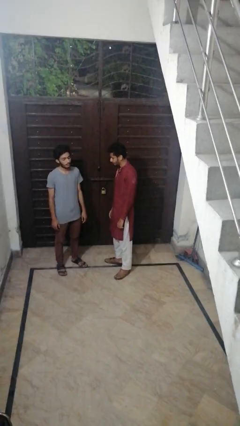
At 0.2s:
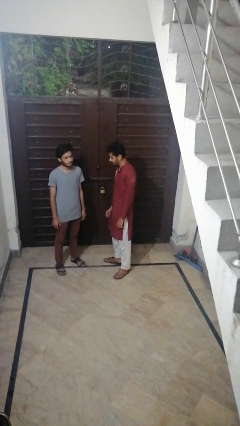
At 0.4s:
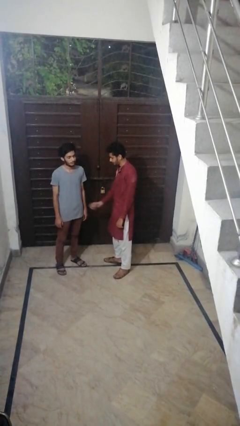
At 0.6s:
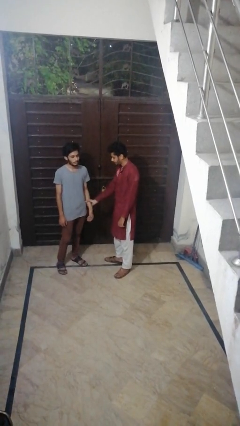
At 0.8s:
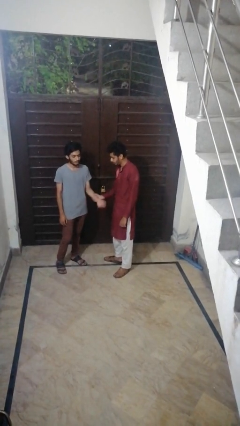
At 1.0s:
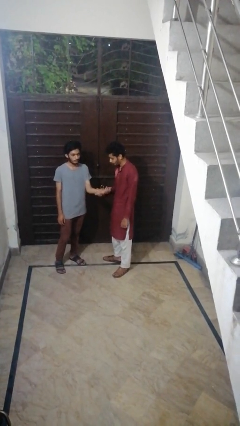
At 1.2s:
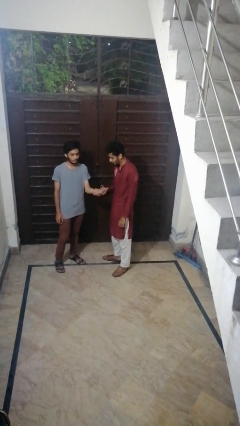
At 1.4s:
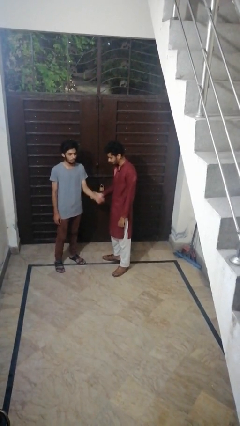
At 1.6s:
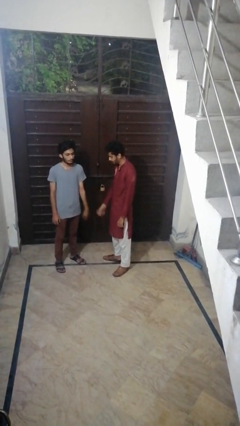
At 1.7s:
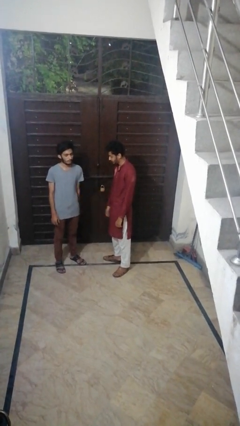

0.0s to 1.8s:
person grabs person by forearm

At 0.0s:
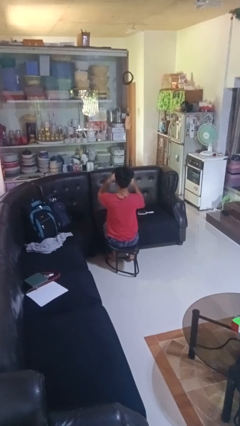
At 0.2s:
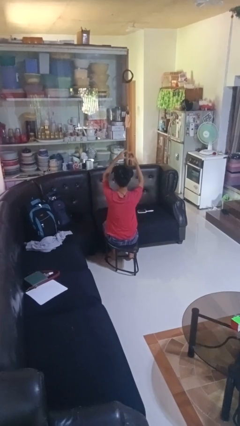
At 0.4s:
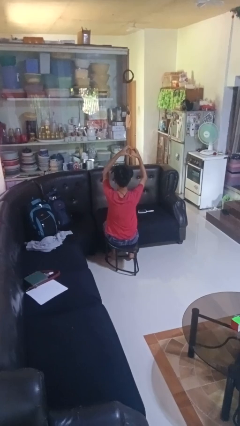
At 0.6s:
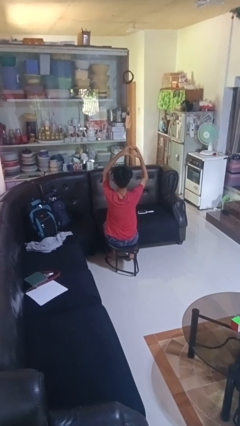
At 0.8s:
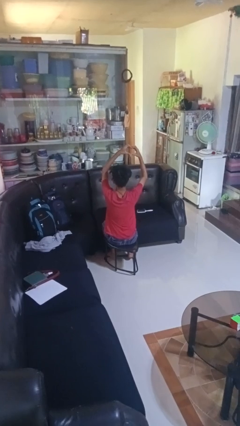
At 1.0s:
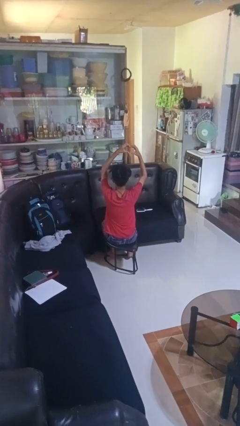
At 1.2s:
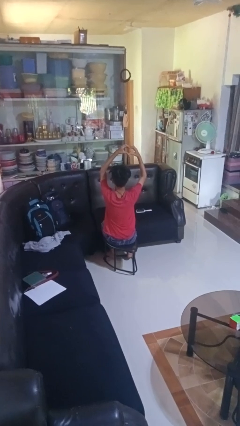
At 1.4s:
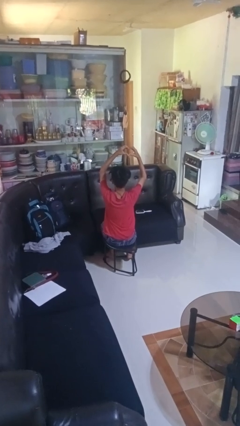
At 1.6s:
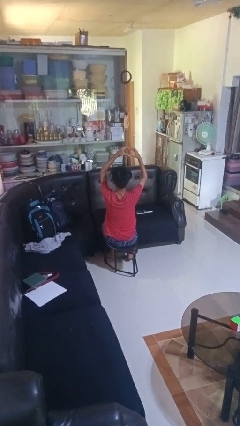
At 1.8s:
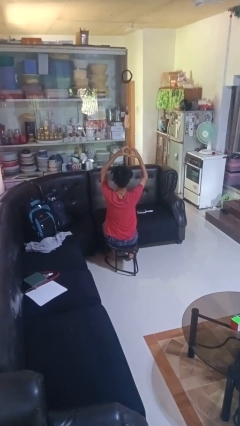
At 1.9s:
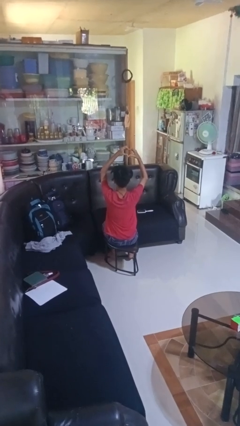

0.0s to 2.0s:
person gestures heart

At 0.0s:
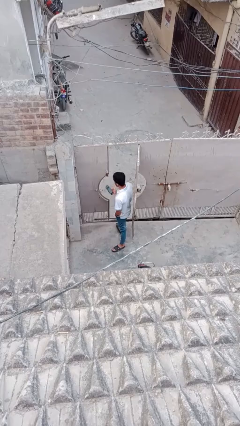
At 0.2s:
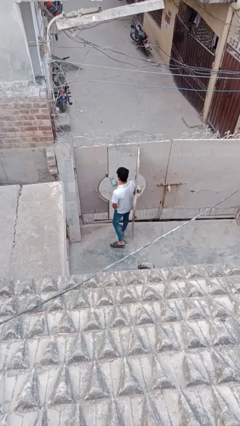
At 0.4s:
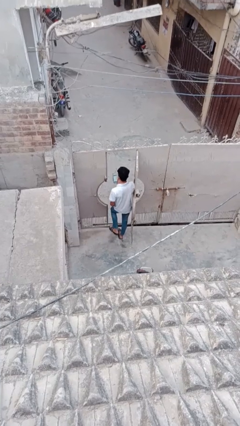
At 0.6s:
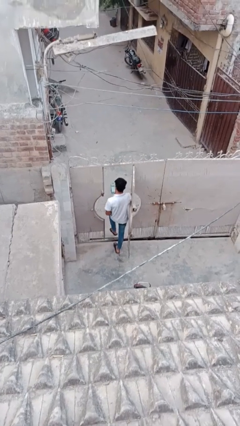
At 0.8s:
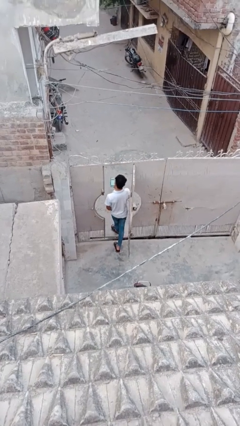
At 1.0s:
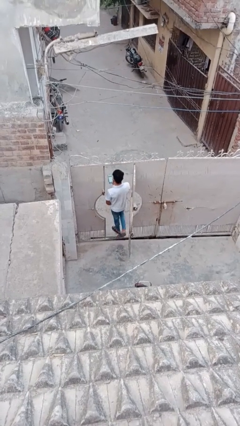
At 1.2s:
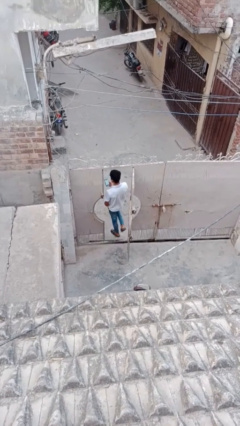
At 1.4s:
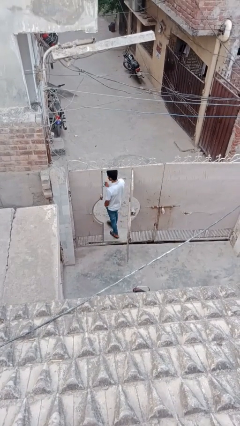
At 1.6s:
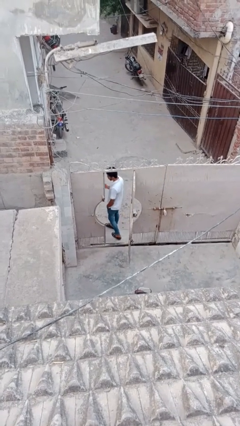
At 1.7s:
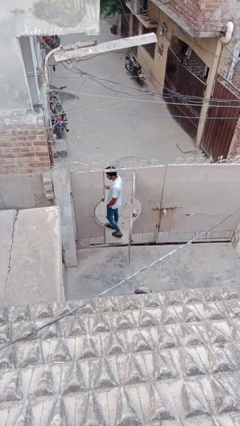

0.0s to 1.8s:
person exits scene through structure

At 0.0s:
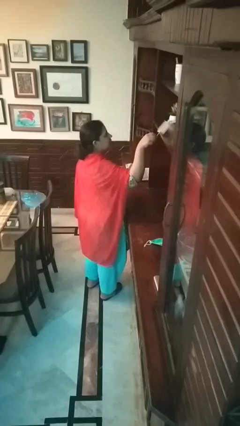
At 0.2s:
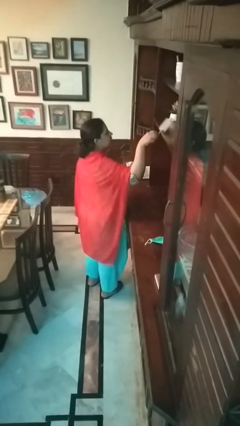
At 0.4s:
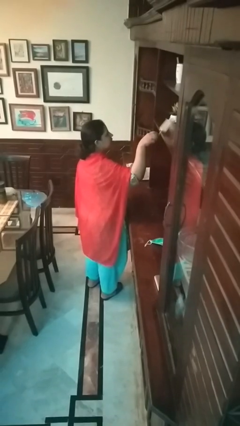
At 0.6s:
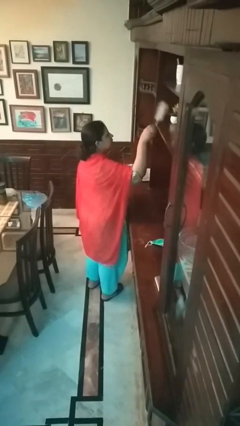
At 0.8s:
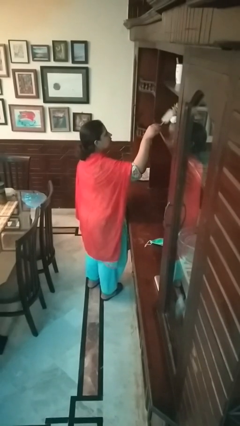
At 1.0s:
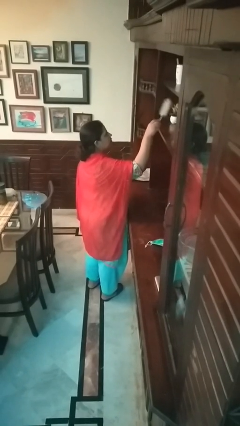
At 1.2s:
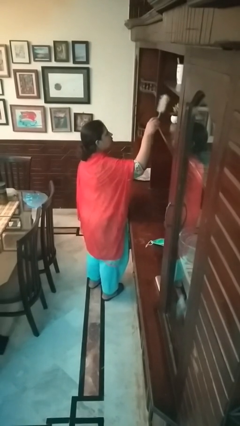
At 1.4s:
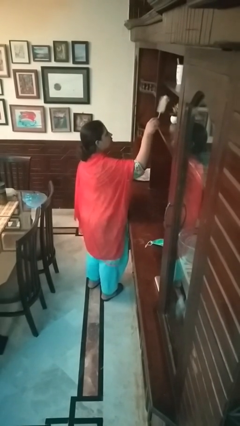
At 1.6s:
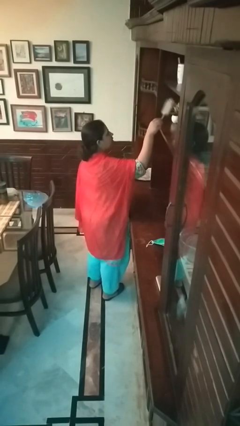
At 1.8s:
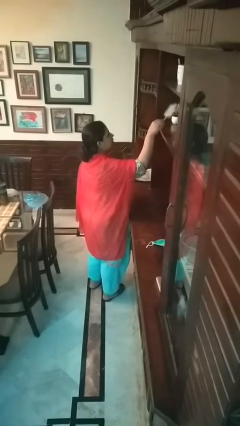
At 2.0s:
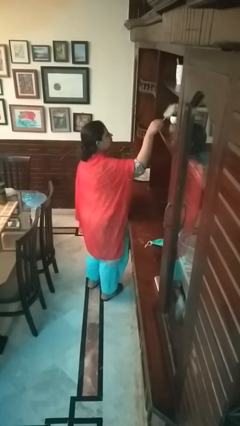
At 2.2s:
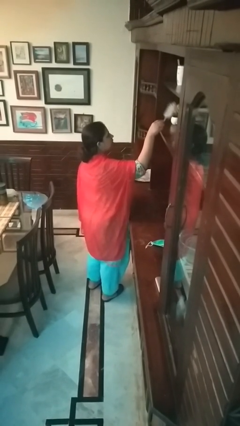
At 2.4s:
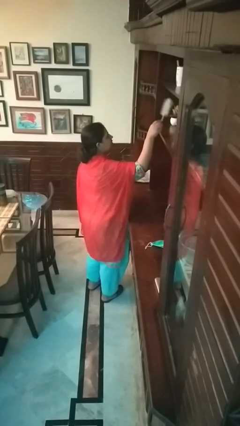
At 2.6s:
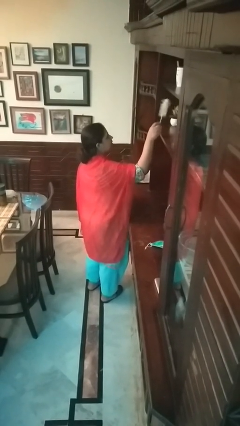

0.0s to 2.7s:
person dusts furniture

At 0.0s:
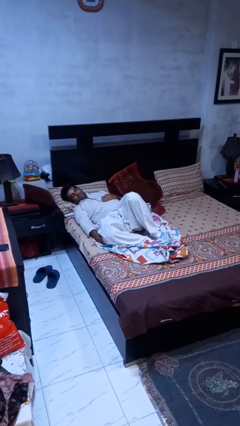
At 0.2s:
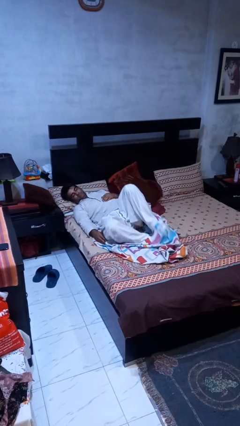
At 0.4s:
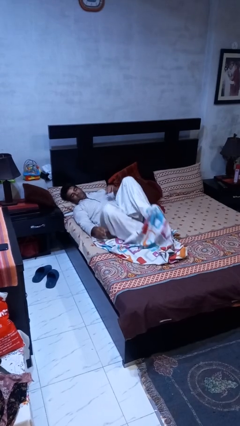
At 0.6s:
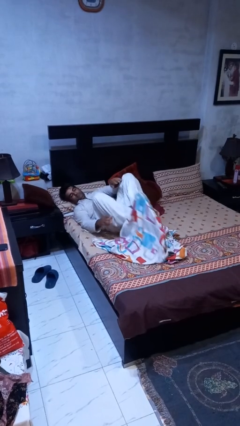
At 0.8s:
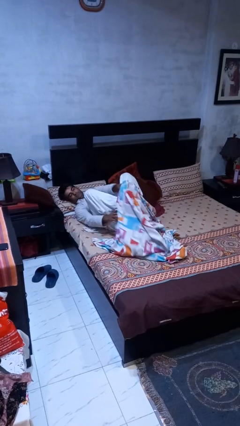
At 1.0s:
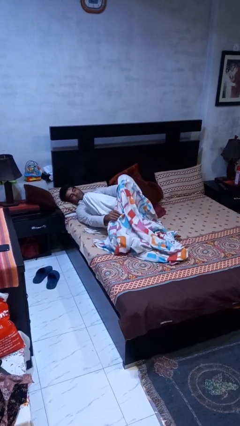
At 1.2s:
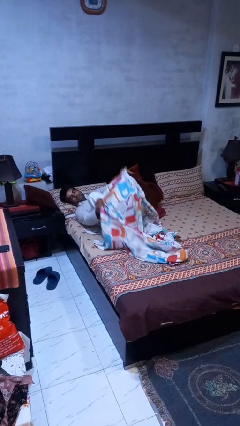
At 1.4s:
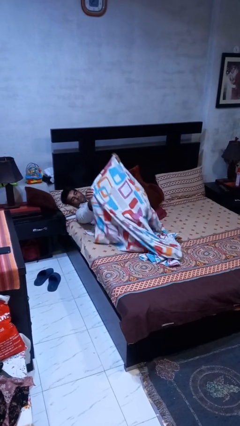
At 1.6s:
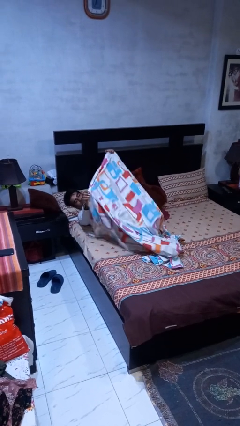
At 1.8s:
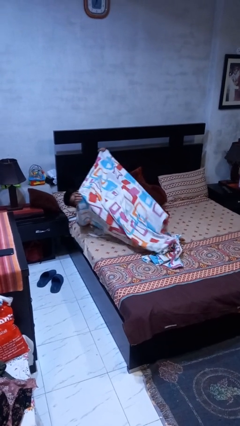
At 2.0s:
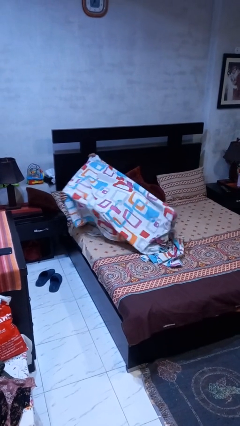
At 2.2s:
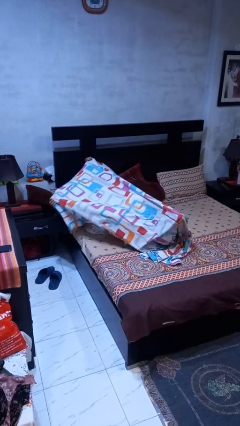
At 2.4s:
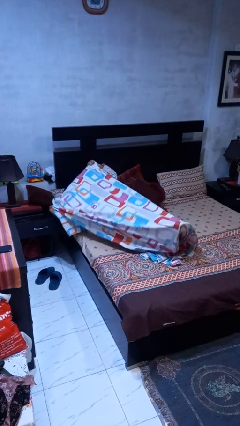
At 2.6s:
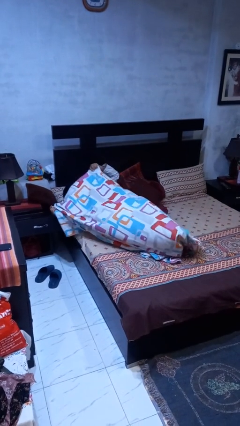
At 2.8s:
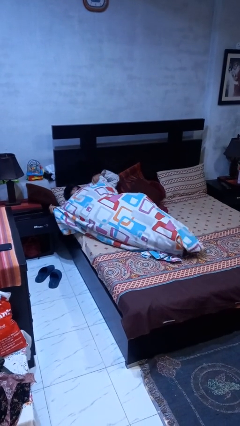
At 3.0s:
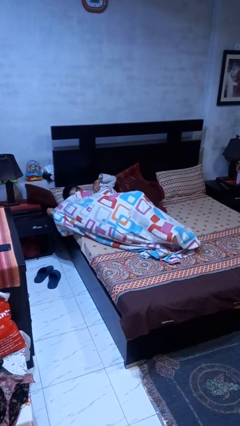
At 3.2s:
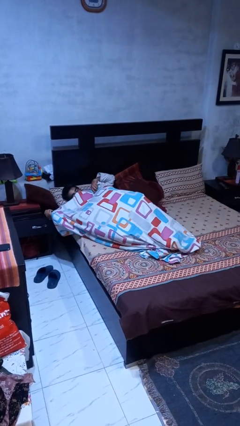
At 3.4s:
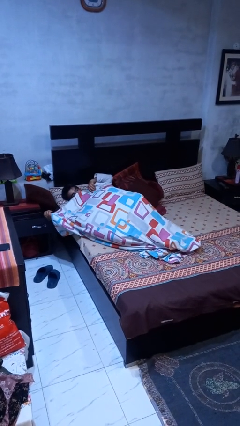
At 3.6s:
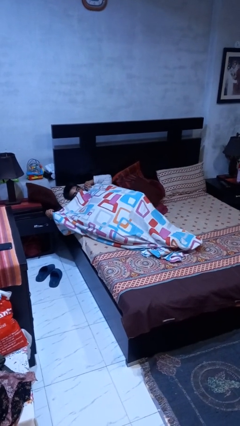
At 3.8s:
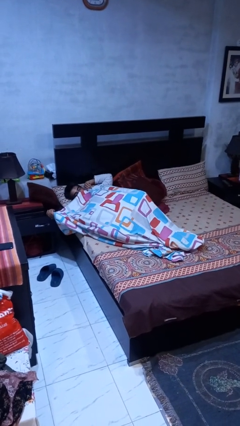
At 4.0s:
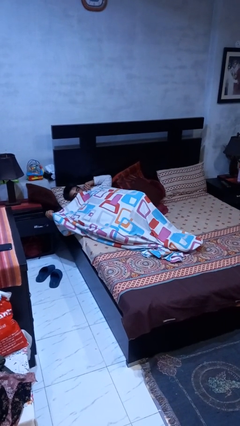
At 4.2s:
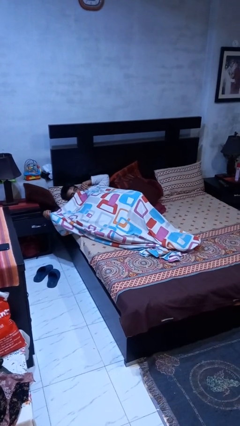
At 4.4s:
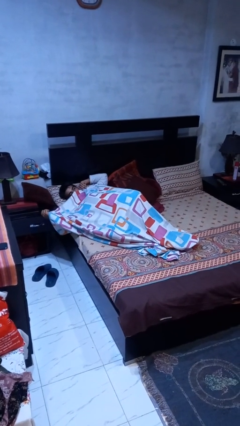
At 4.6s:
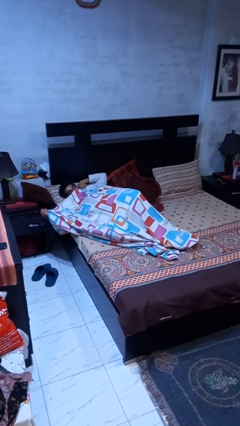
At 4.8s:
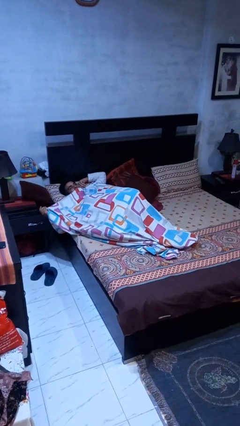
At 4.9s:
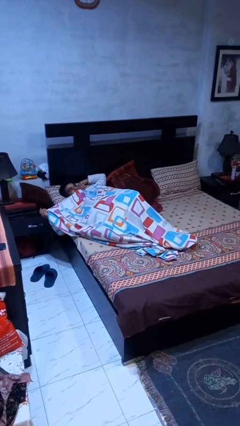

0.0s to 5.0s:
person covers with bedsheets

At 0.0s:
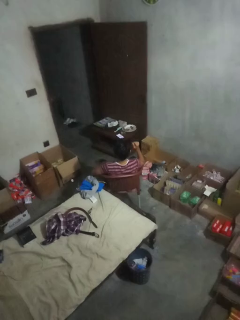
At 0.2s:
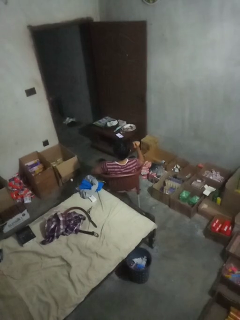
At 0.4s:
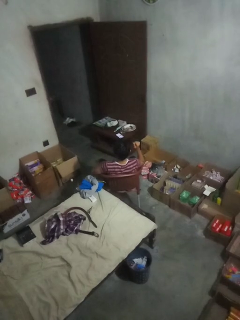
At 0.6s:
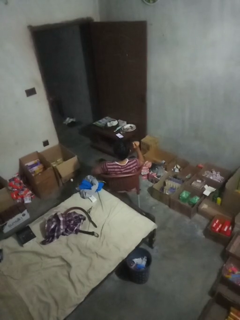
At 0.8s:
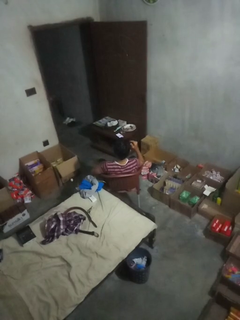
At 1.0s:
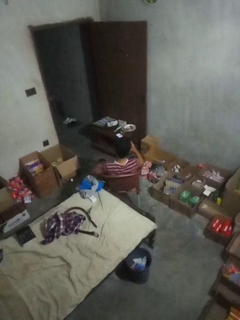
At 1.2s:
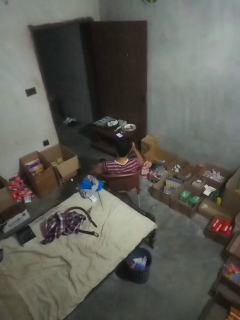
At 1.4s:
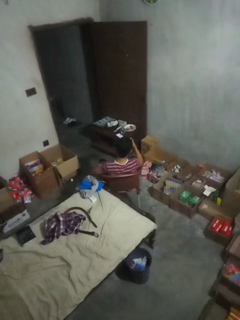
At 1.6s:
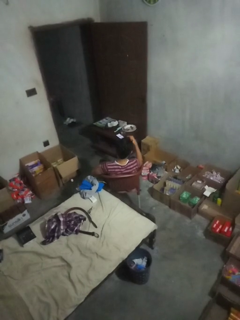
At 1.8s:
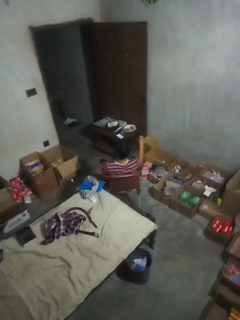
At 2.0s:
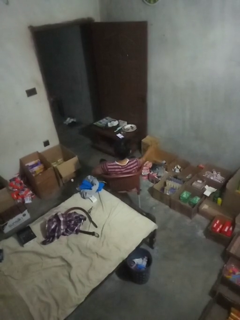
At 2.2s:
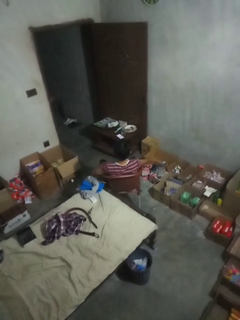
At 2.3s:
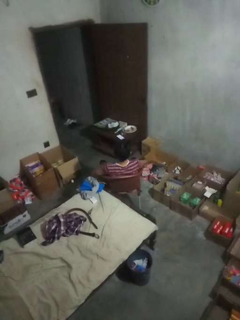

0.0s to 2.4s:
person takes off sunglasses

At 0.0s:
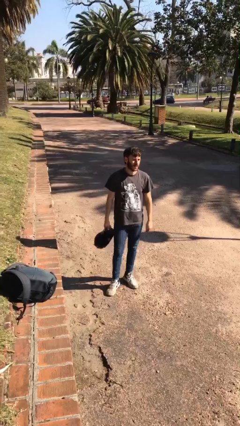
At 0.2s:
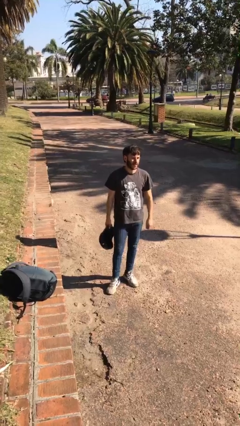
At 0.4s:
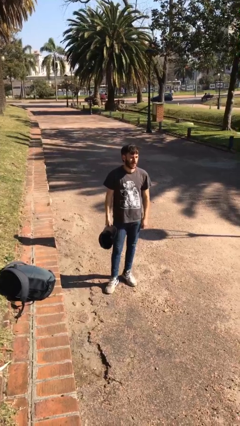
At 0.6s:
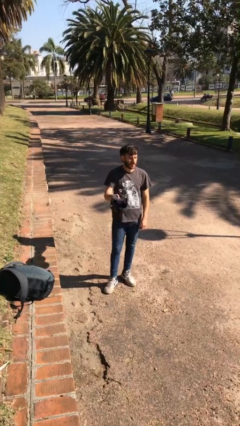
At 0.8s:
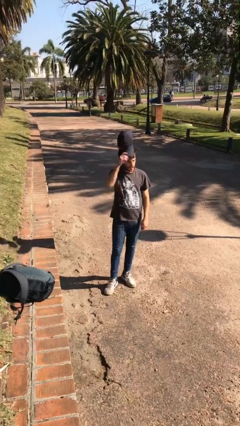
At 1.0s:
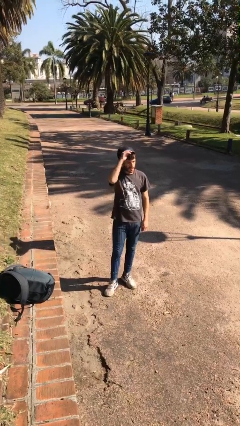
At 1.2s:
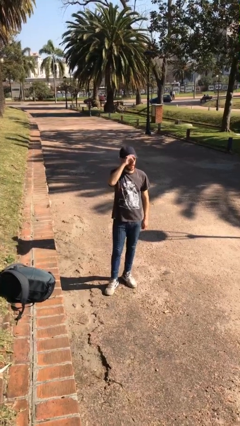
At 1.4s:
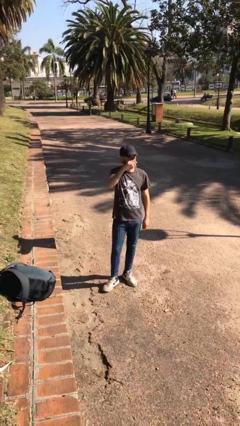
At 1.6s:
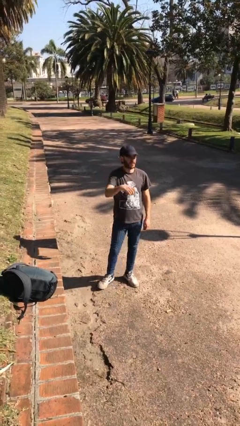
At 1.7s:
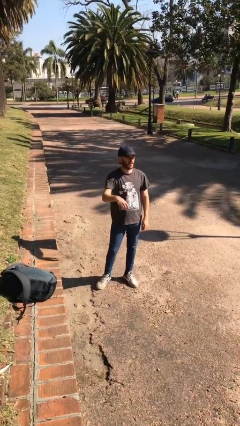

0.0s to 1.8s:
person puts on hat
